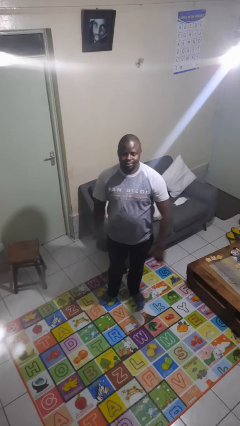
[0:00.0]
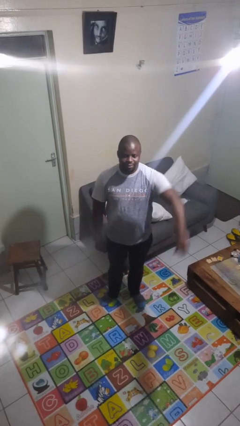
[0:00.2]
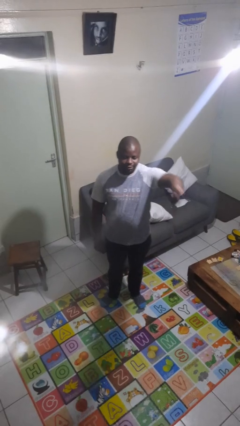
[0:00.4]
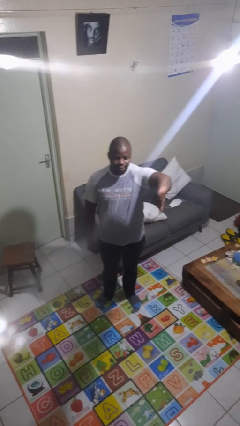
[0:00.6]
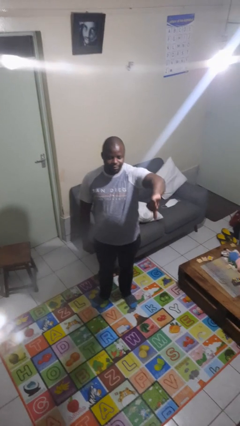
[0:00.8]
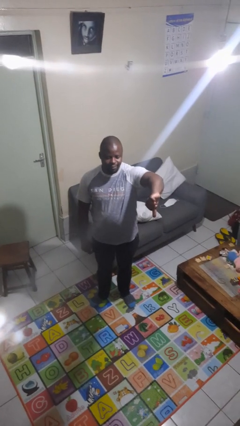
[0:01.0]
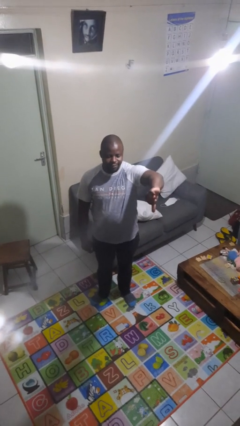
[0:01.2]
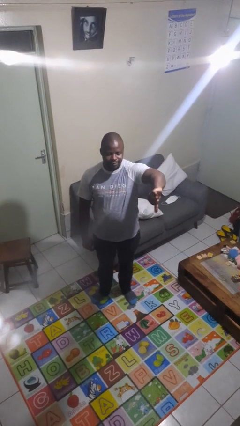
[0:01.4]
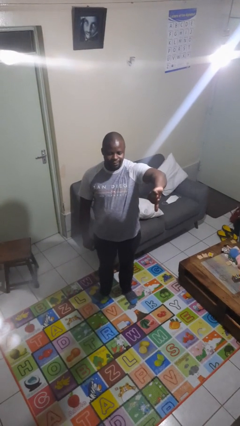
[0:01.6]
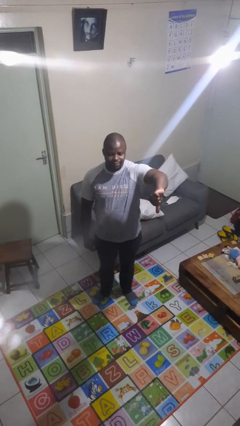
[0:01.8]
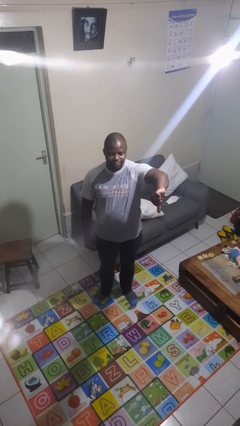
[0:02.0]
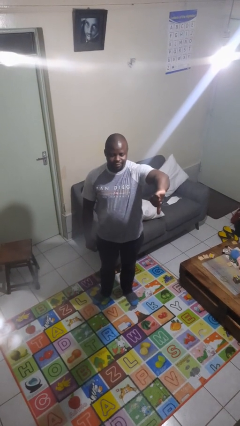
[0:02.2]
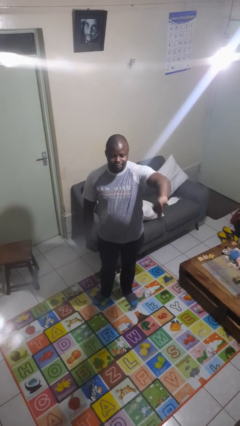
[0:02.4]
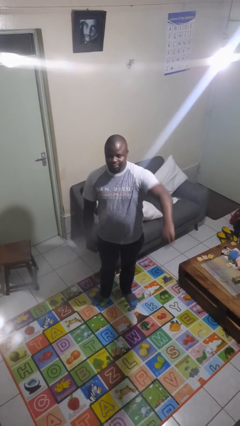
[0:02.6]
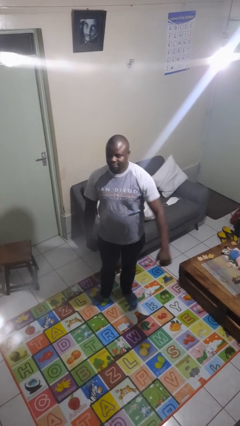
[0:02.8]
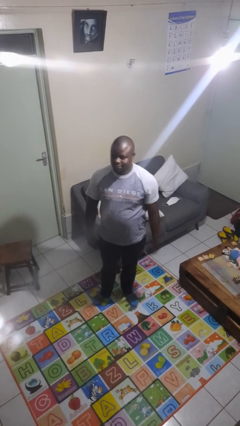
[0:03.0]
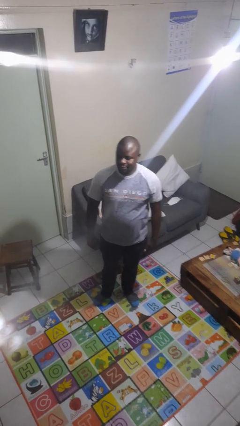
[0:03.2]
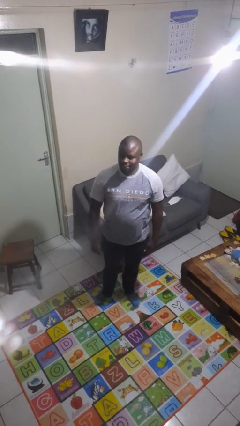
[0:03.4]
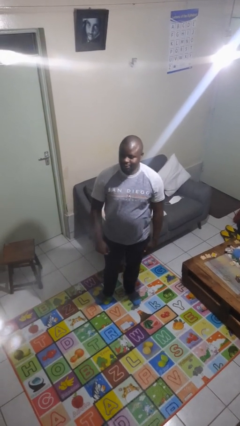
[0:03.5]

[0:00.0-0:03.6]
person gestures thumbs down

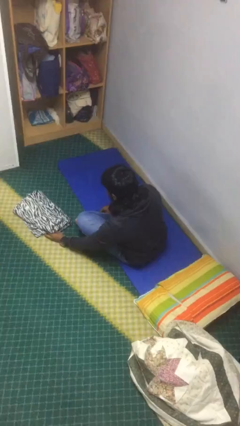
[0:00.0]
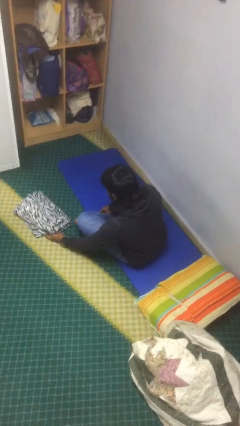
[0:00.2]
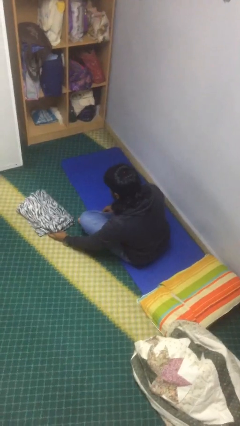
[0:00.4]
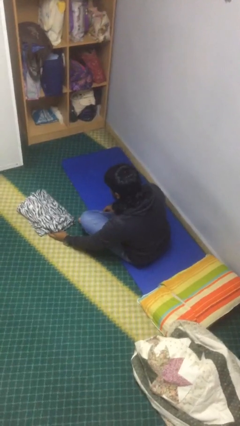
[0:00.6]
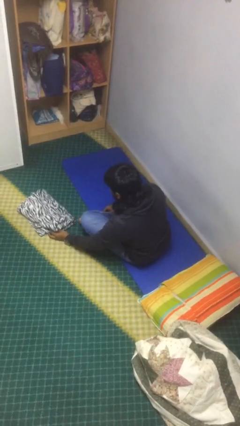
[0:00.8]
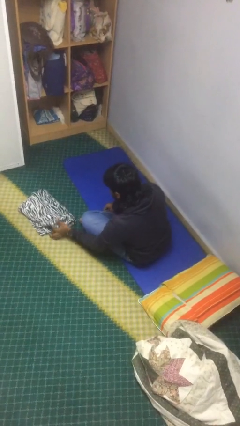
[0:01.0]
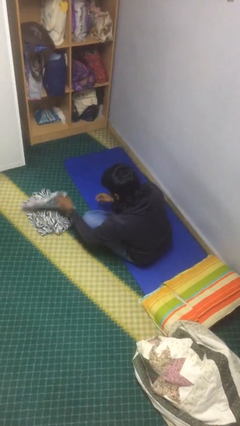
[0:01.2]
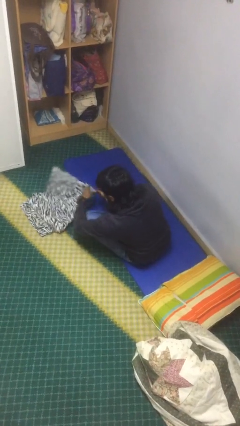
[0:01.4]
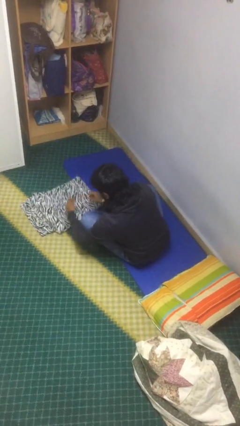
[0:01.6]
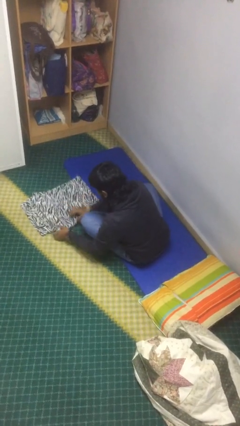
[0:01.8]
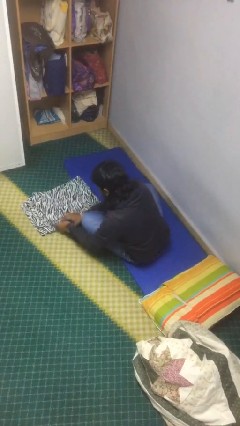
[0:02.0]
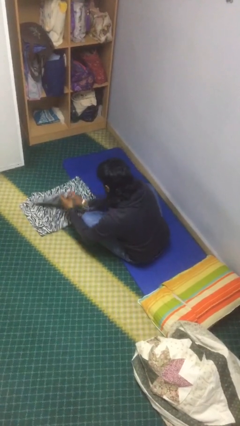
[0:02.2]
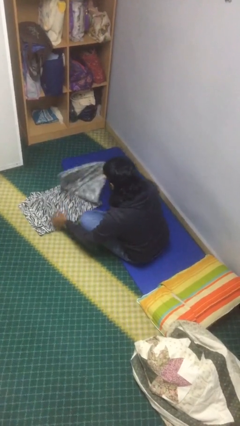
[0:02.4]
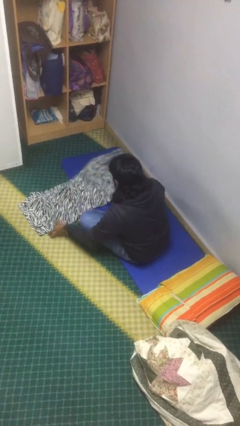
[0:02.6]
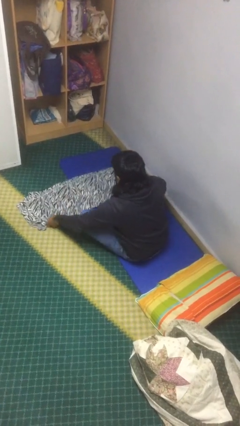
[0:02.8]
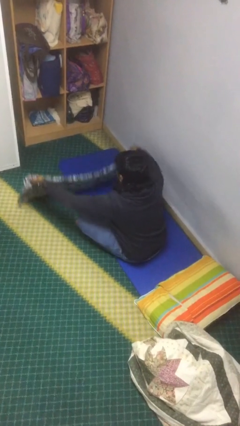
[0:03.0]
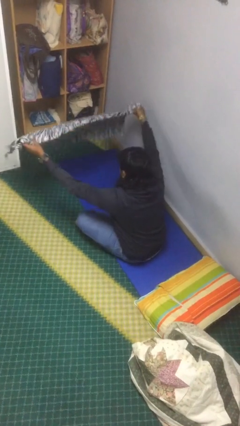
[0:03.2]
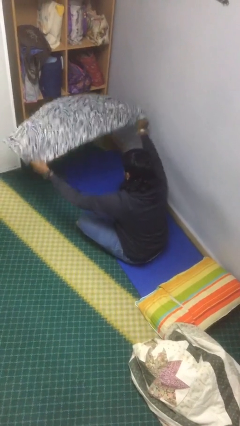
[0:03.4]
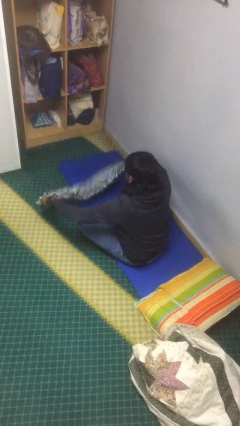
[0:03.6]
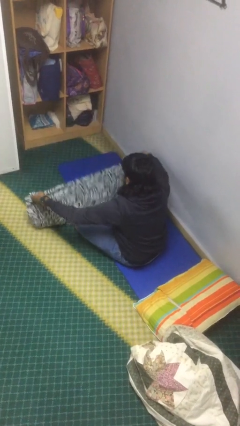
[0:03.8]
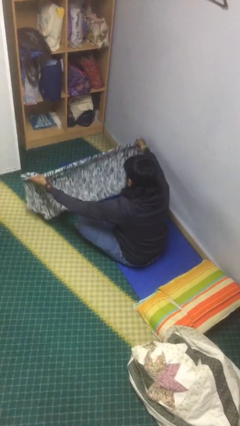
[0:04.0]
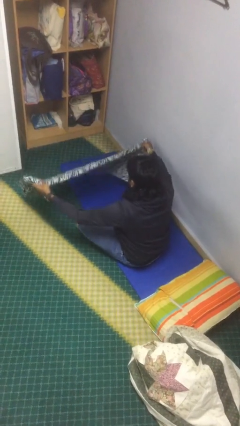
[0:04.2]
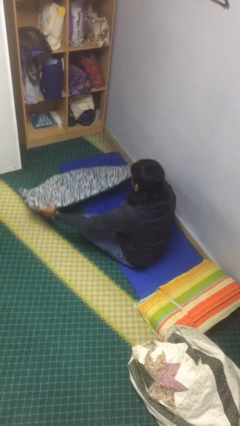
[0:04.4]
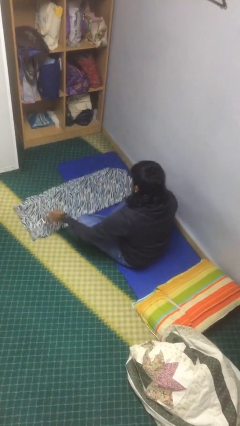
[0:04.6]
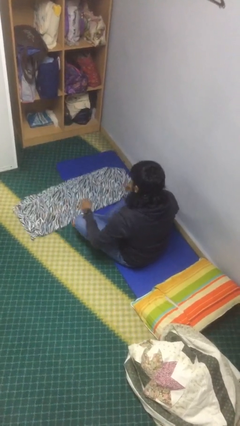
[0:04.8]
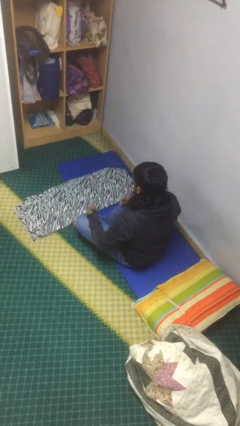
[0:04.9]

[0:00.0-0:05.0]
person unfolds blanket

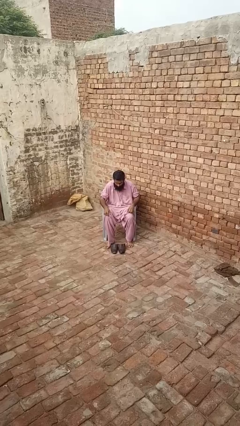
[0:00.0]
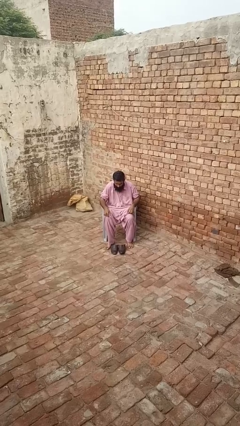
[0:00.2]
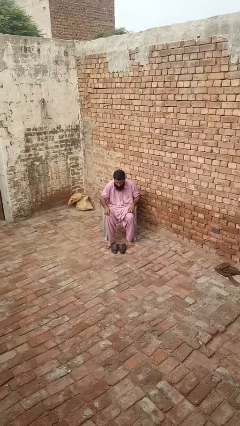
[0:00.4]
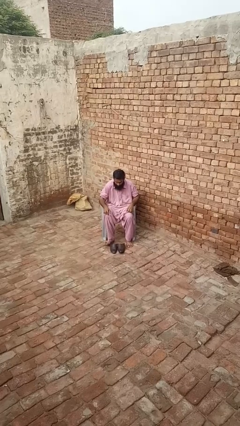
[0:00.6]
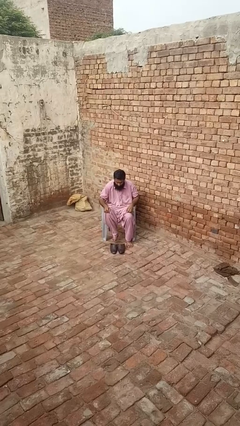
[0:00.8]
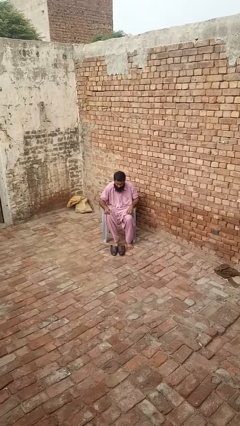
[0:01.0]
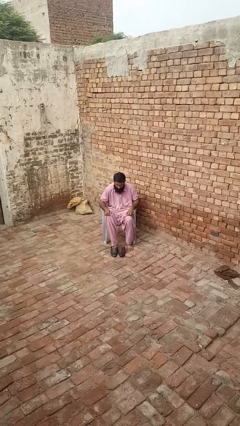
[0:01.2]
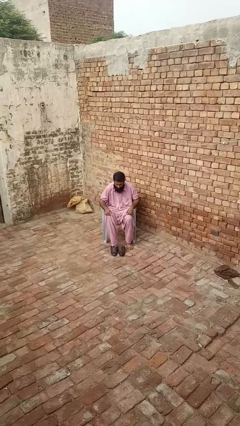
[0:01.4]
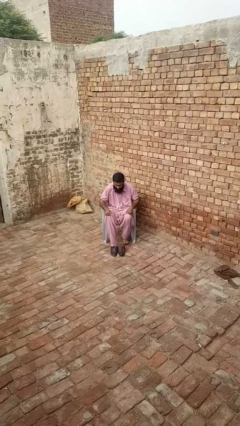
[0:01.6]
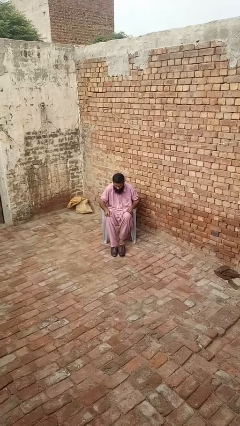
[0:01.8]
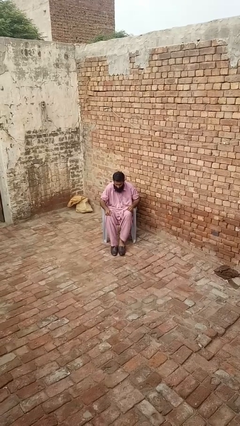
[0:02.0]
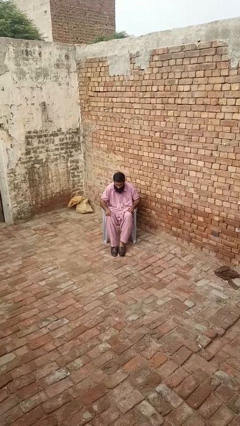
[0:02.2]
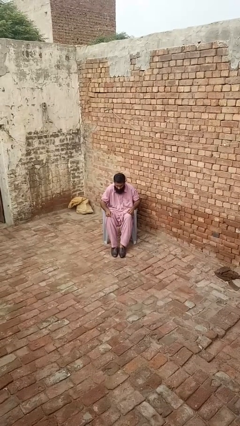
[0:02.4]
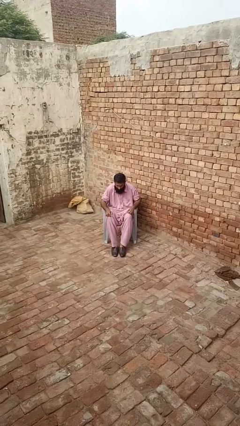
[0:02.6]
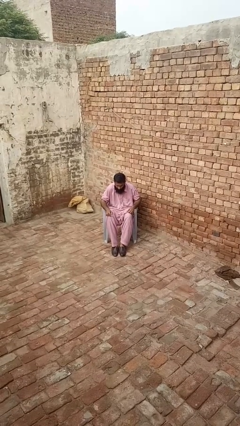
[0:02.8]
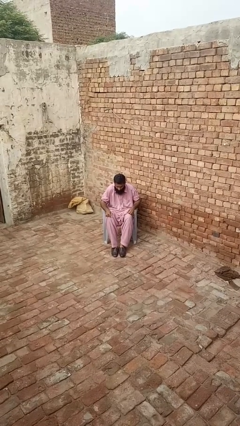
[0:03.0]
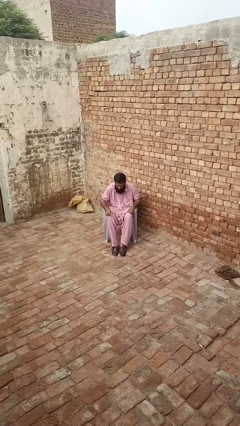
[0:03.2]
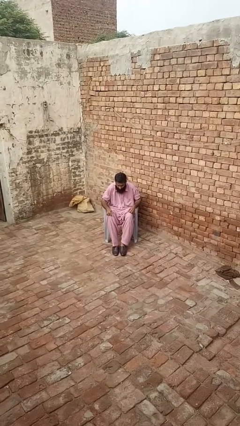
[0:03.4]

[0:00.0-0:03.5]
person puts on shoes

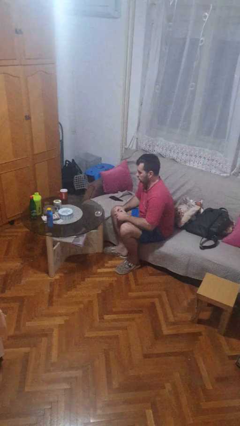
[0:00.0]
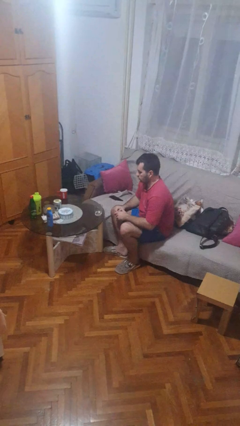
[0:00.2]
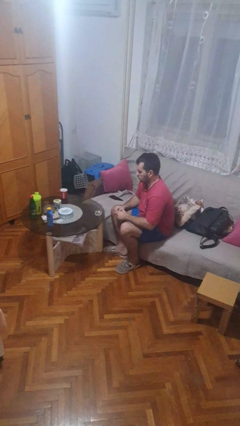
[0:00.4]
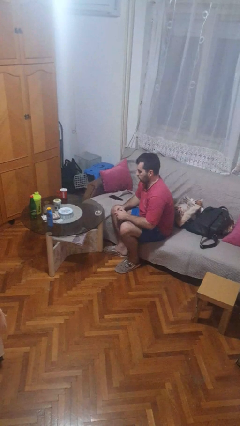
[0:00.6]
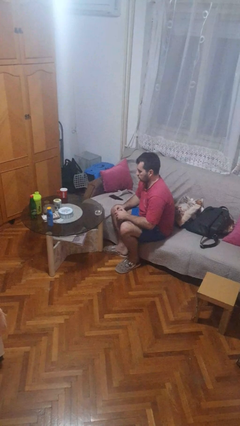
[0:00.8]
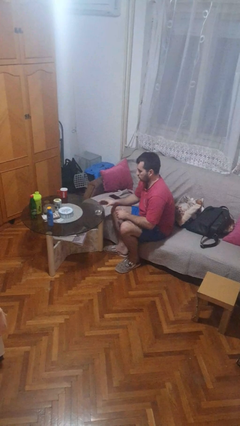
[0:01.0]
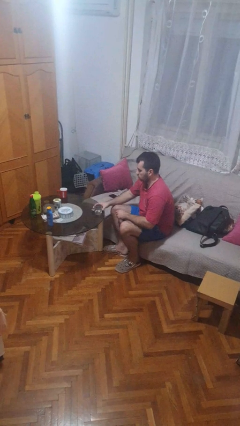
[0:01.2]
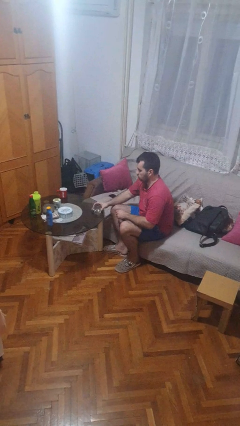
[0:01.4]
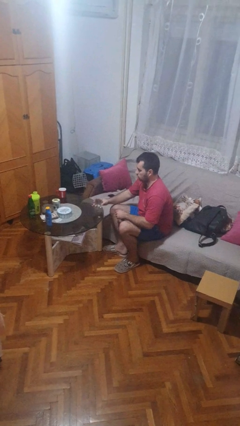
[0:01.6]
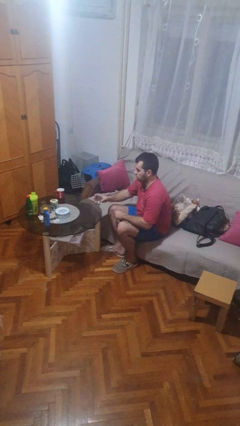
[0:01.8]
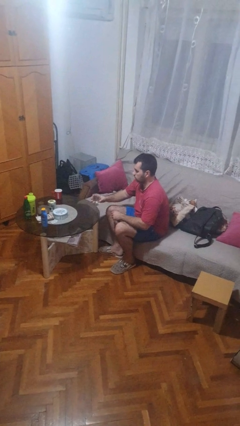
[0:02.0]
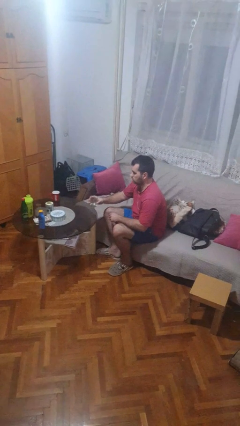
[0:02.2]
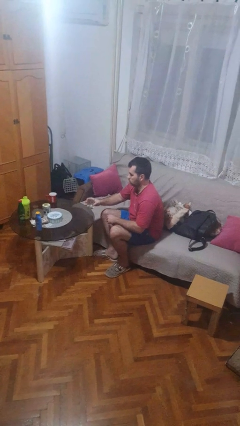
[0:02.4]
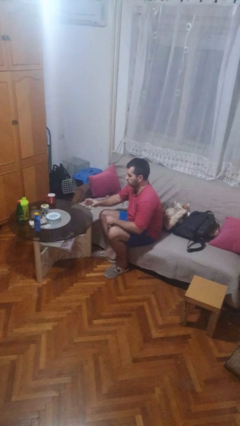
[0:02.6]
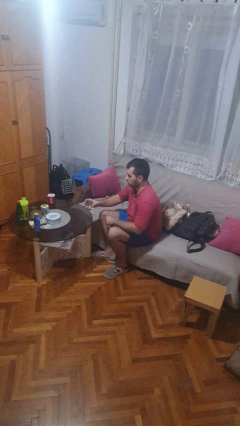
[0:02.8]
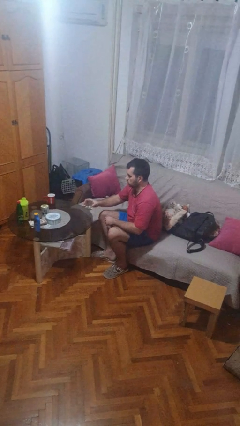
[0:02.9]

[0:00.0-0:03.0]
person picks up object from table

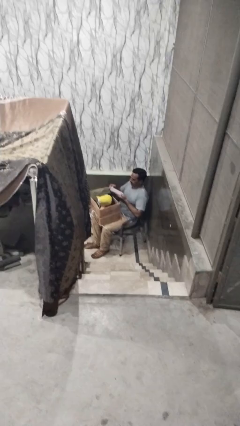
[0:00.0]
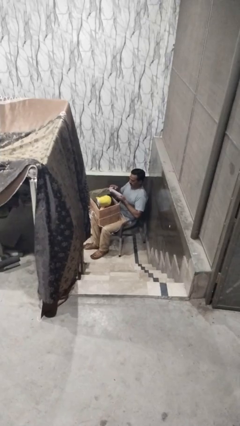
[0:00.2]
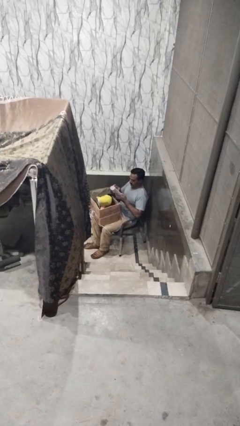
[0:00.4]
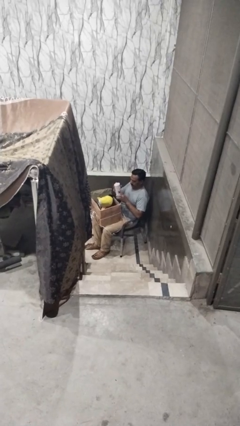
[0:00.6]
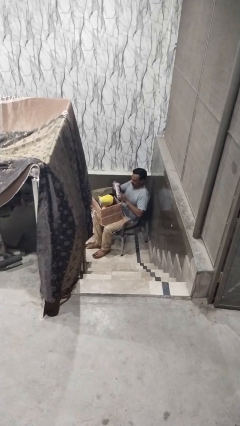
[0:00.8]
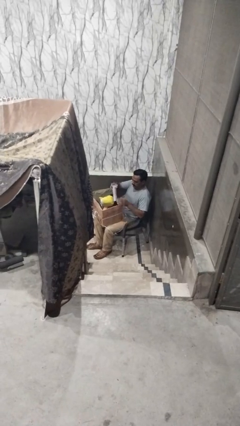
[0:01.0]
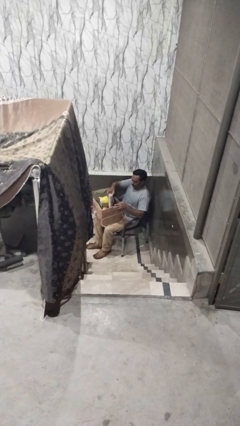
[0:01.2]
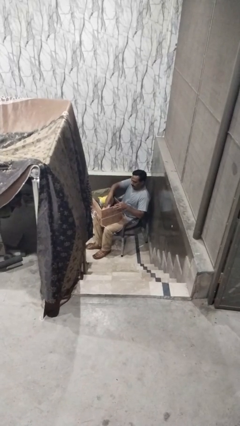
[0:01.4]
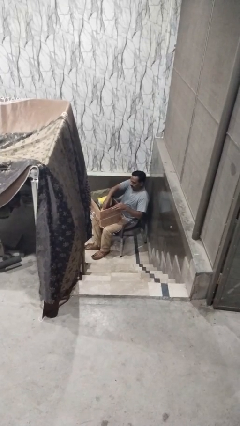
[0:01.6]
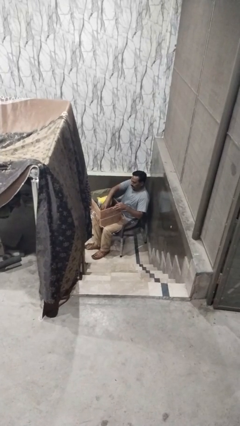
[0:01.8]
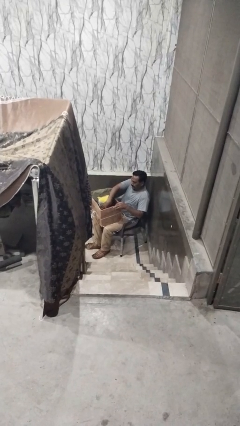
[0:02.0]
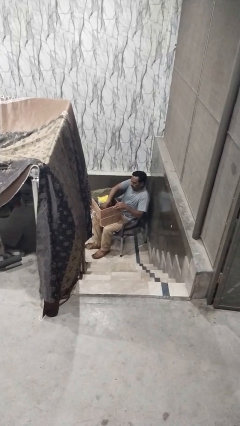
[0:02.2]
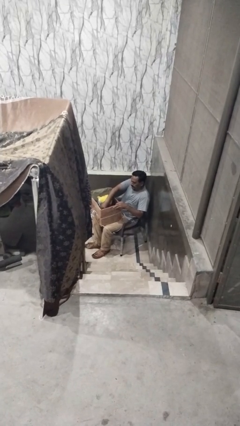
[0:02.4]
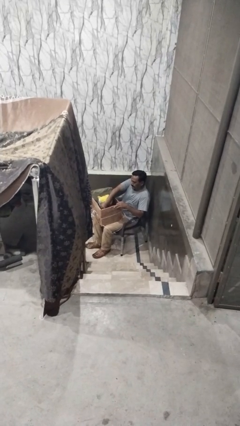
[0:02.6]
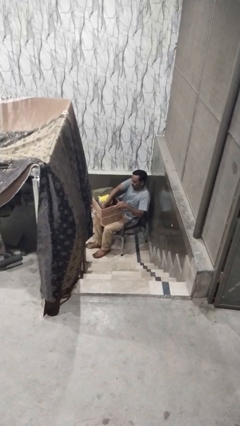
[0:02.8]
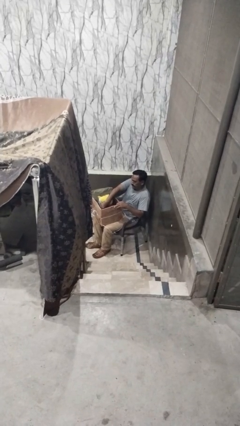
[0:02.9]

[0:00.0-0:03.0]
person puts object into box
